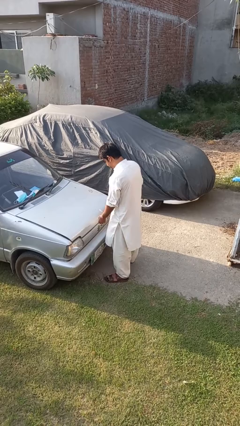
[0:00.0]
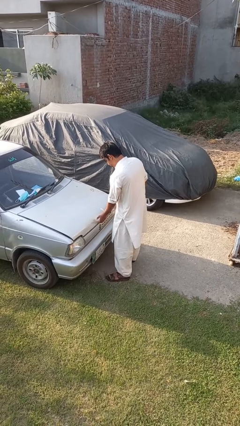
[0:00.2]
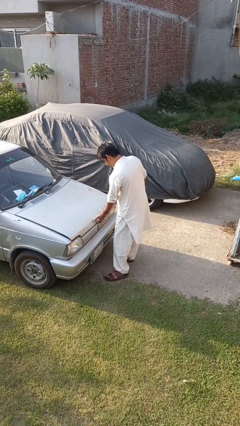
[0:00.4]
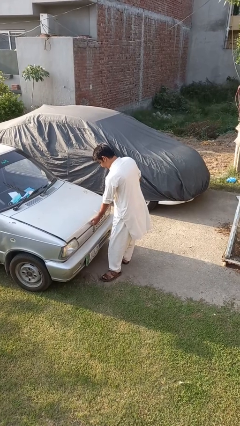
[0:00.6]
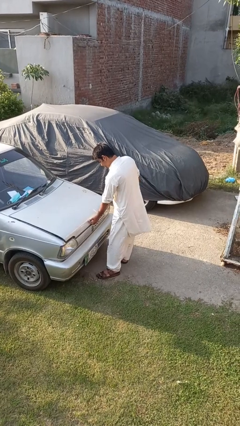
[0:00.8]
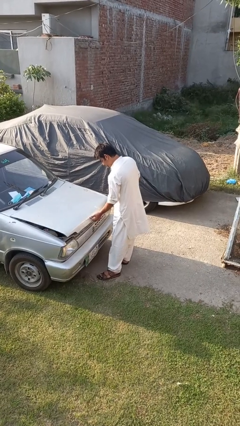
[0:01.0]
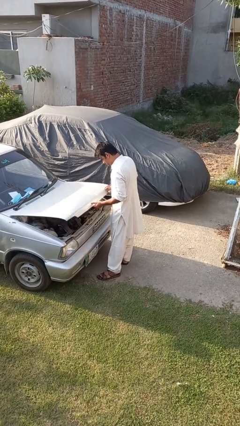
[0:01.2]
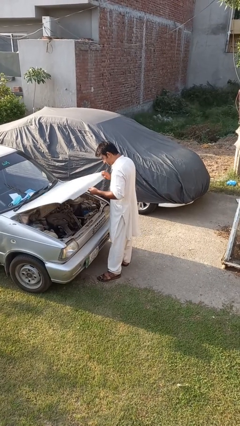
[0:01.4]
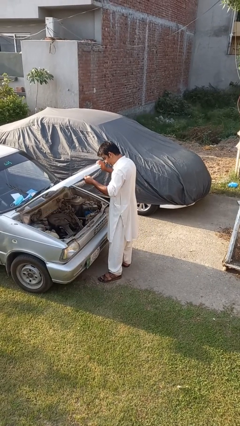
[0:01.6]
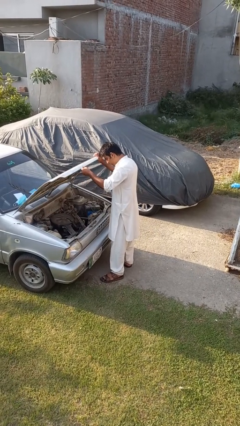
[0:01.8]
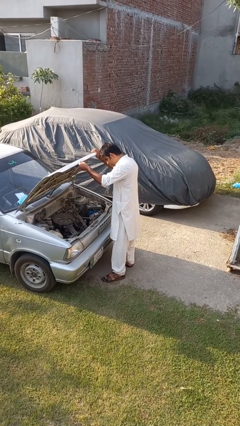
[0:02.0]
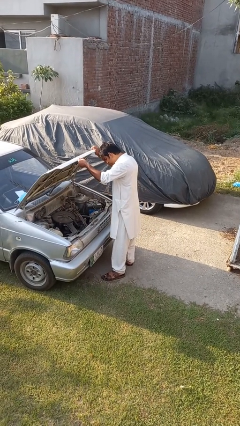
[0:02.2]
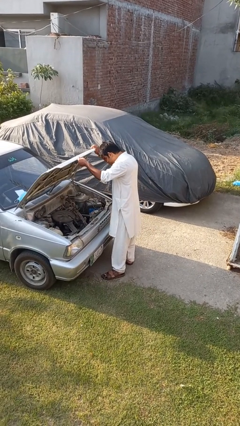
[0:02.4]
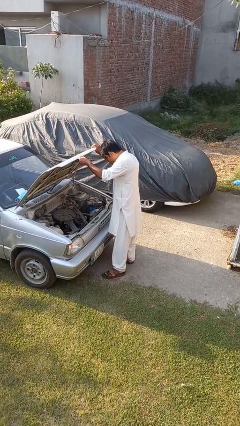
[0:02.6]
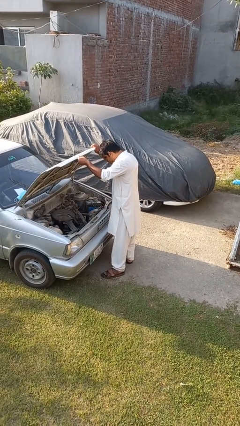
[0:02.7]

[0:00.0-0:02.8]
person opens car hood

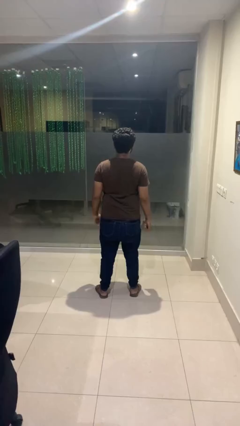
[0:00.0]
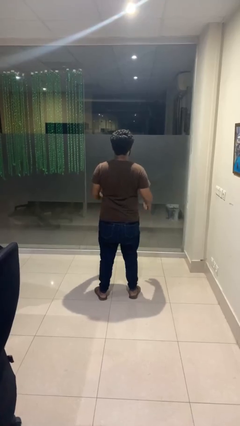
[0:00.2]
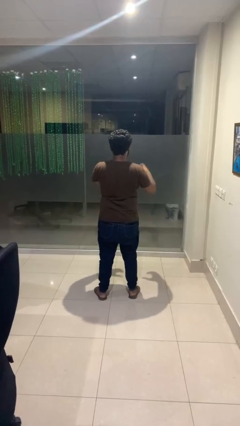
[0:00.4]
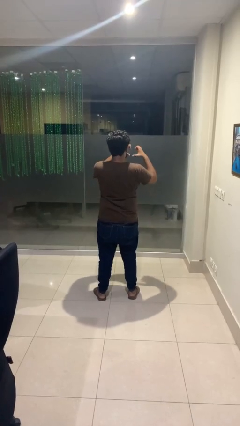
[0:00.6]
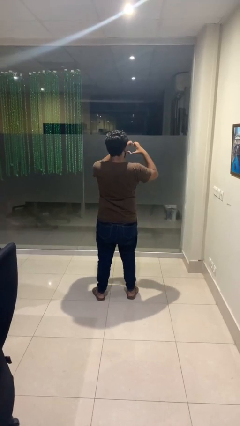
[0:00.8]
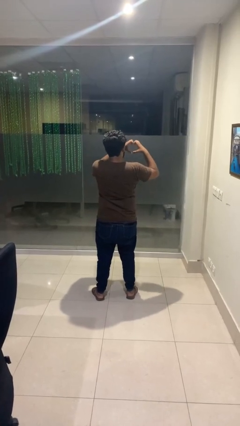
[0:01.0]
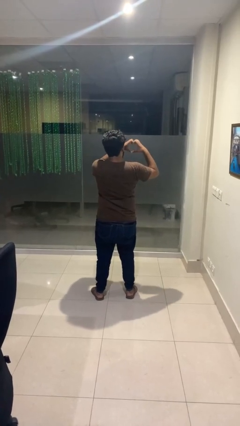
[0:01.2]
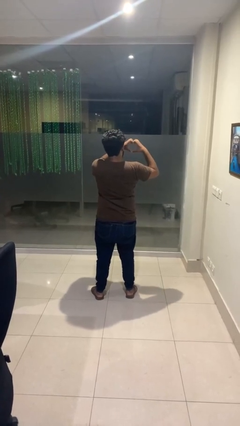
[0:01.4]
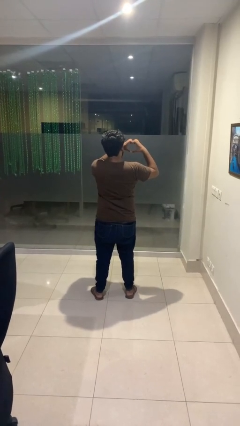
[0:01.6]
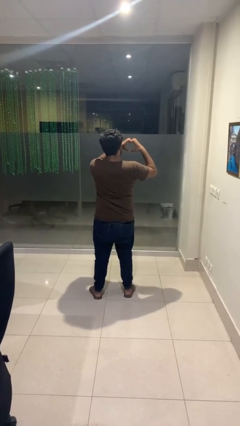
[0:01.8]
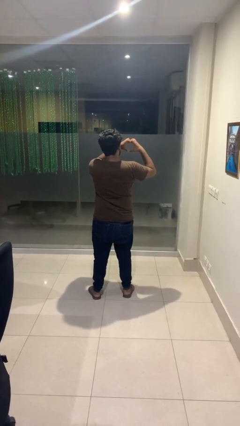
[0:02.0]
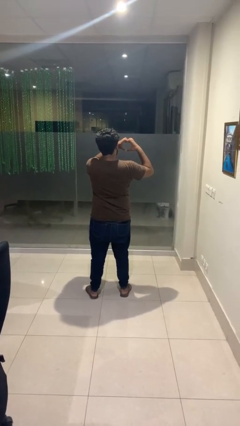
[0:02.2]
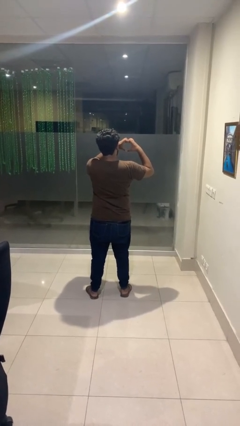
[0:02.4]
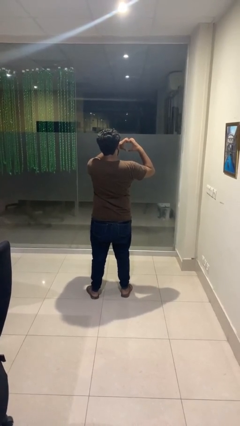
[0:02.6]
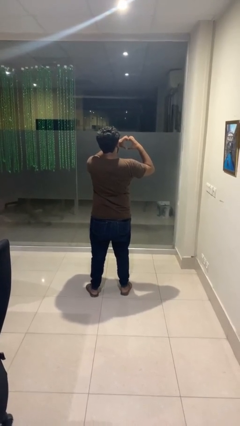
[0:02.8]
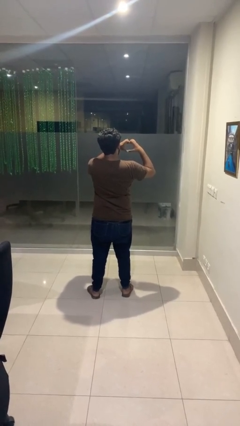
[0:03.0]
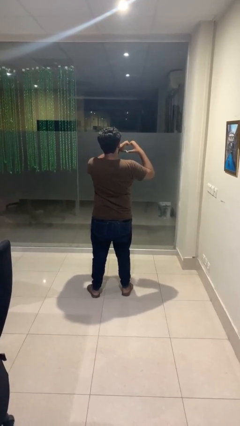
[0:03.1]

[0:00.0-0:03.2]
person gestures heart

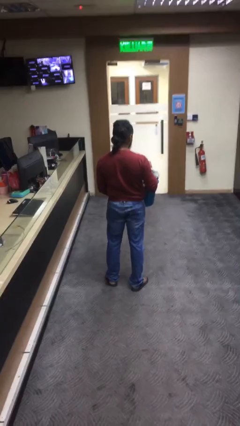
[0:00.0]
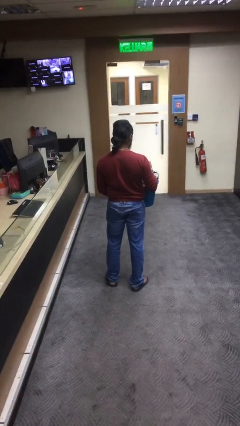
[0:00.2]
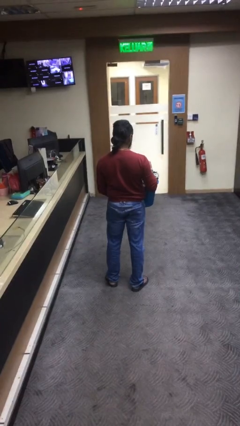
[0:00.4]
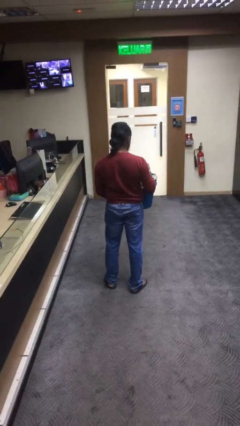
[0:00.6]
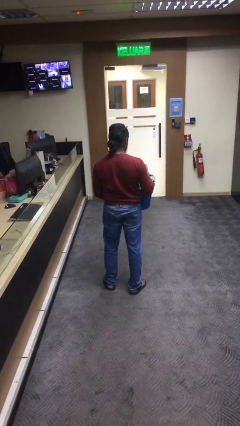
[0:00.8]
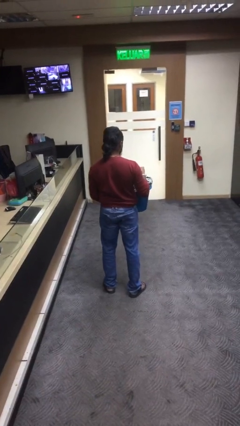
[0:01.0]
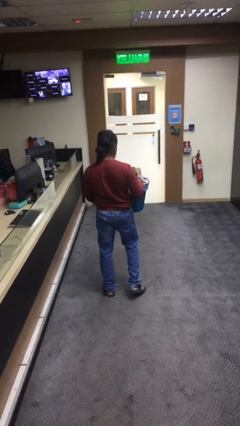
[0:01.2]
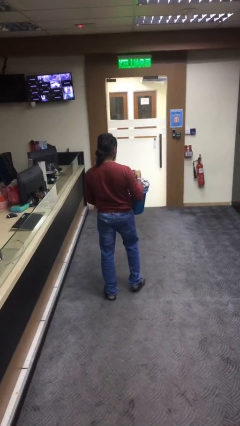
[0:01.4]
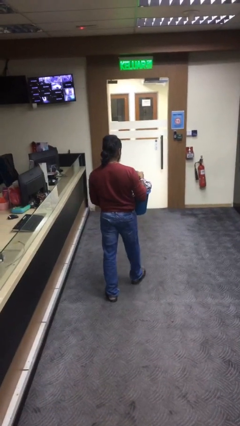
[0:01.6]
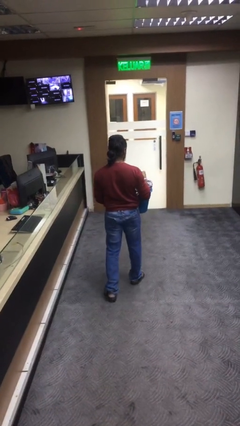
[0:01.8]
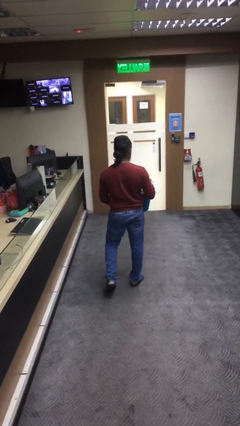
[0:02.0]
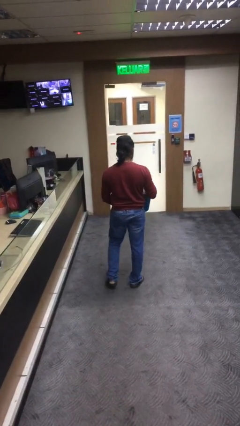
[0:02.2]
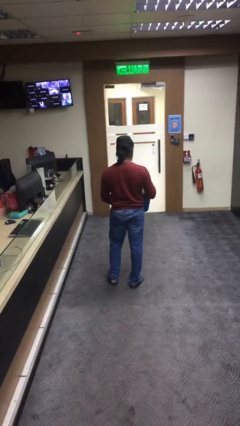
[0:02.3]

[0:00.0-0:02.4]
person carries laundry basket

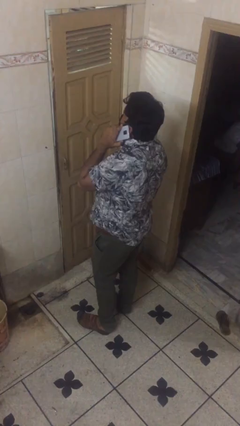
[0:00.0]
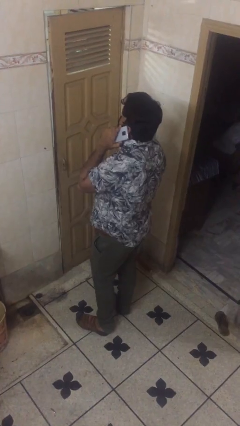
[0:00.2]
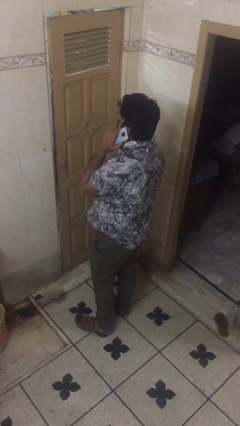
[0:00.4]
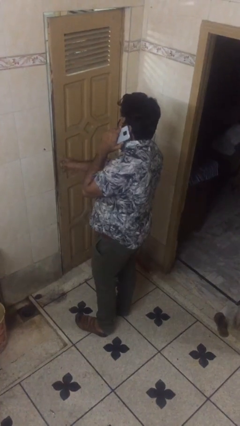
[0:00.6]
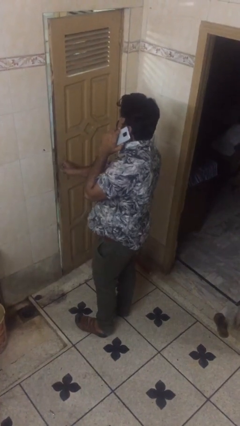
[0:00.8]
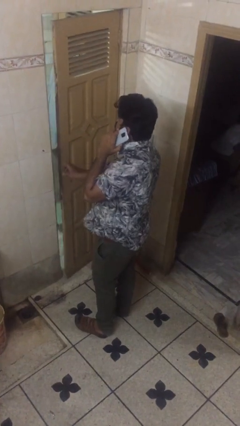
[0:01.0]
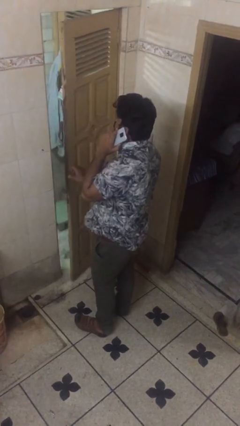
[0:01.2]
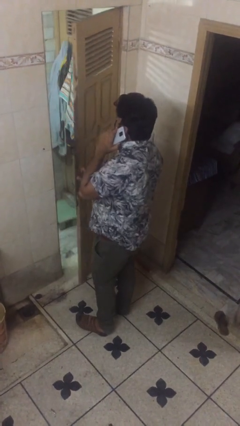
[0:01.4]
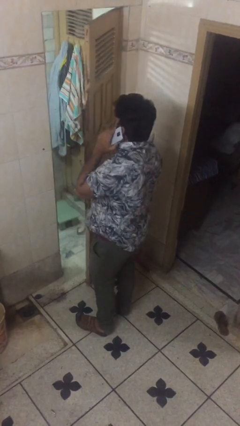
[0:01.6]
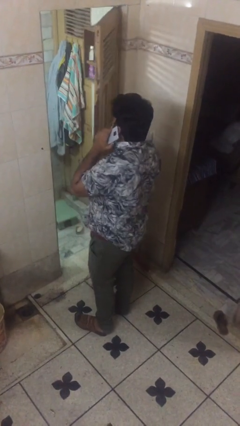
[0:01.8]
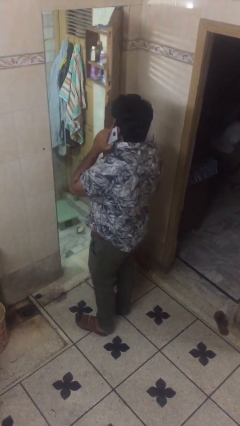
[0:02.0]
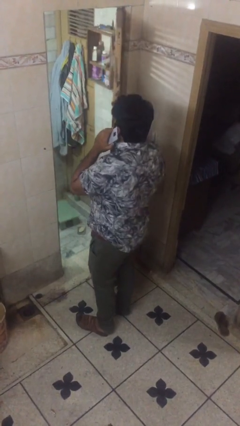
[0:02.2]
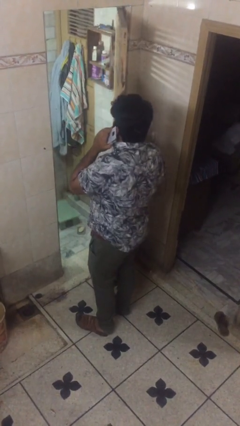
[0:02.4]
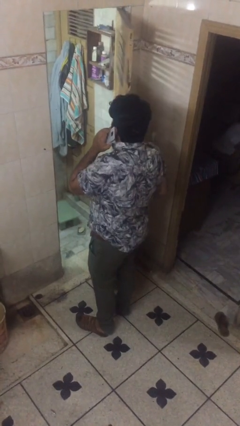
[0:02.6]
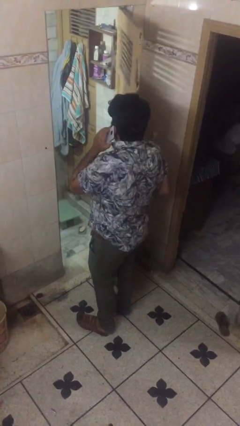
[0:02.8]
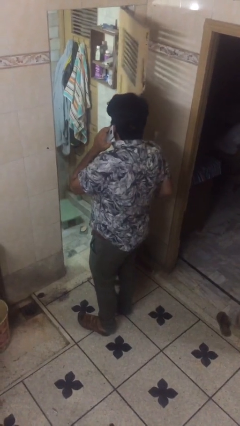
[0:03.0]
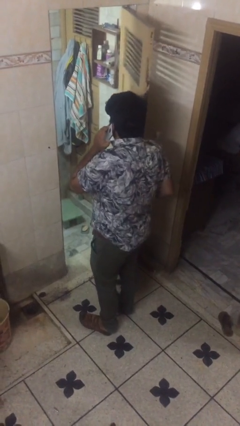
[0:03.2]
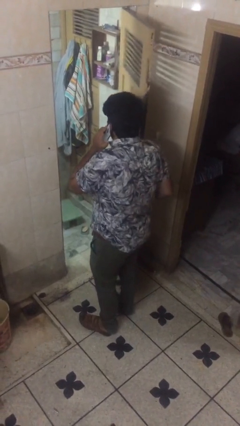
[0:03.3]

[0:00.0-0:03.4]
person opens facility door

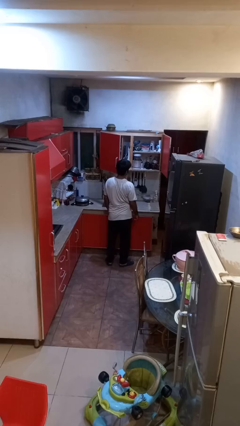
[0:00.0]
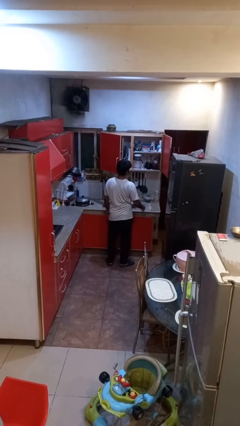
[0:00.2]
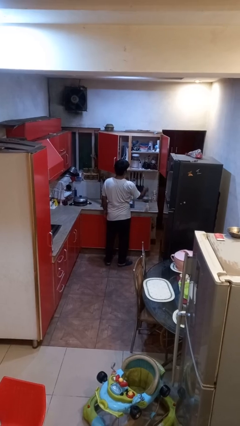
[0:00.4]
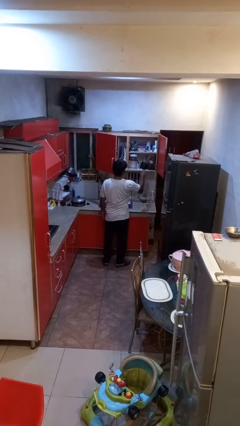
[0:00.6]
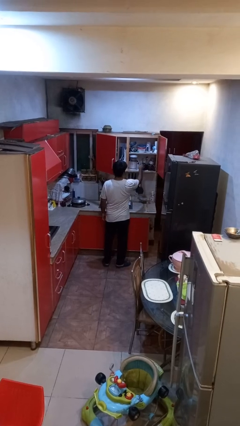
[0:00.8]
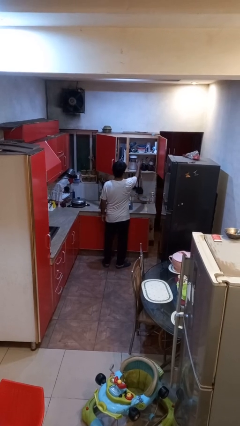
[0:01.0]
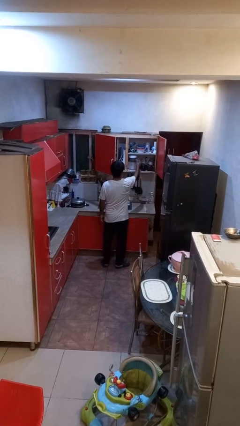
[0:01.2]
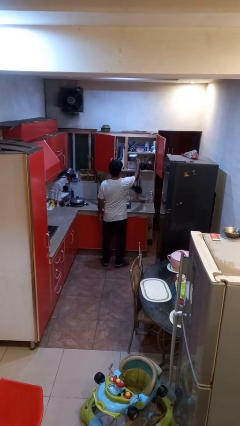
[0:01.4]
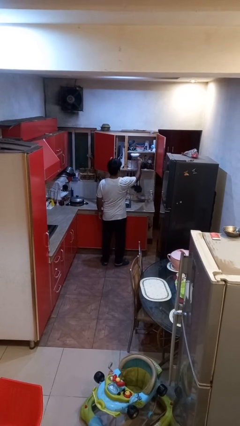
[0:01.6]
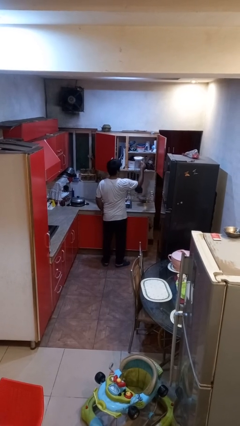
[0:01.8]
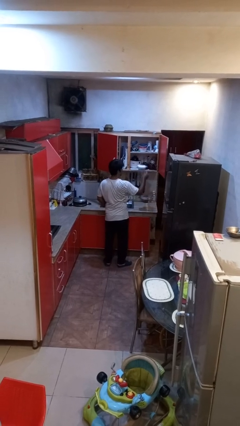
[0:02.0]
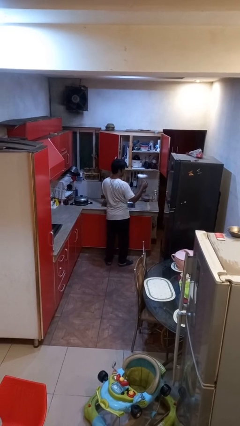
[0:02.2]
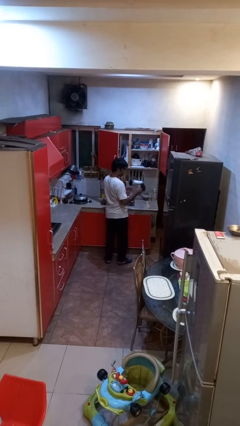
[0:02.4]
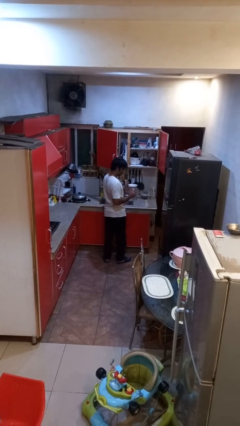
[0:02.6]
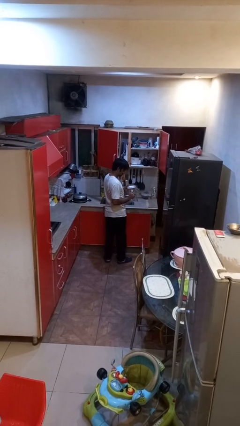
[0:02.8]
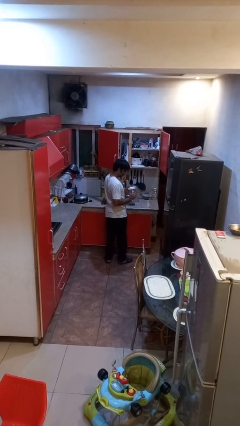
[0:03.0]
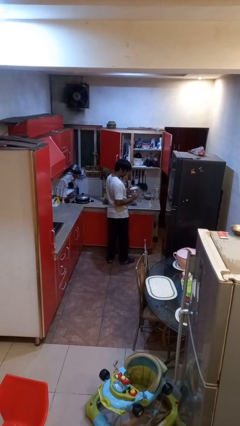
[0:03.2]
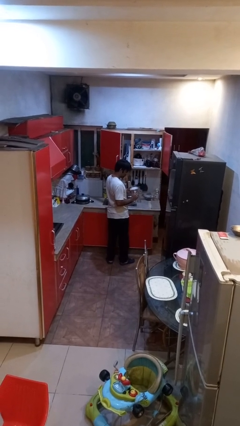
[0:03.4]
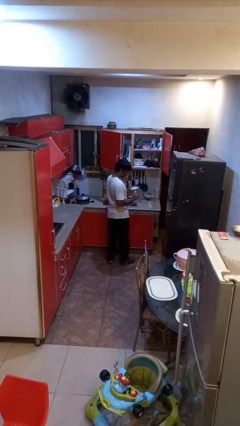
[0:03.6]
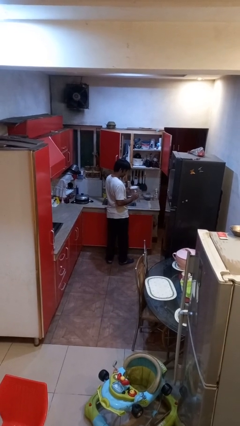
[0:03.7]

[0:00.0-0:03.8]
person picks up object from cabinet

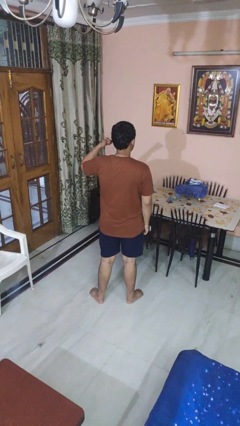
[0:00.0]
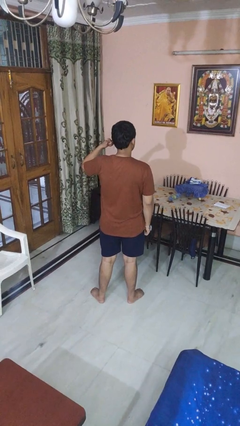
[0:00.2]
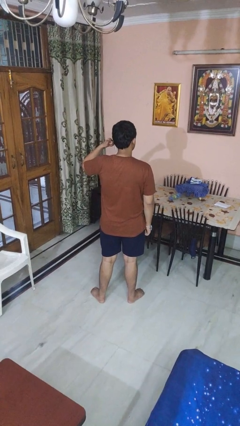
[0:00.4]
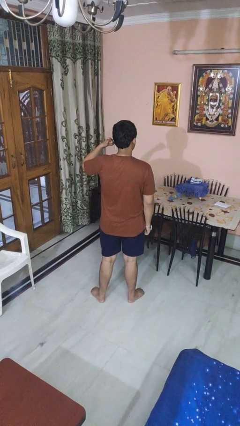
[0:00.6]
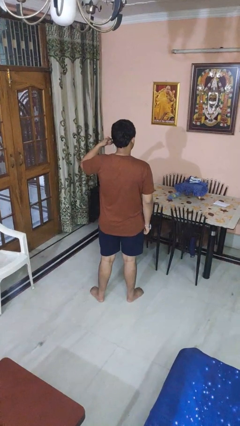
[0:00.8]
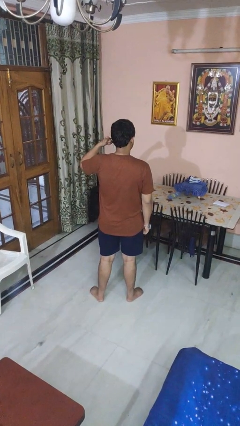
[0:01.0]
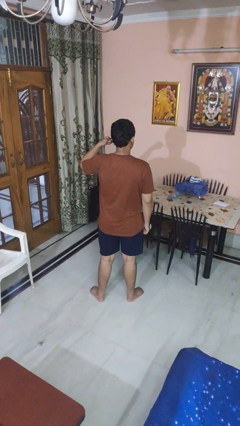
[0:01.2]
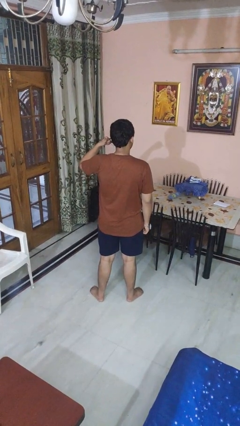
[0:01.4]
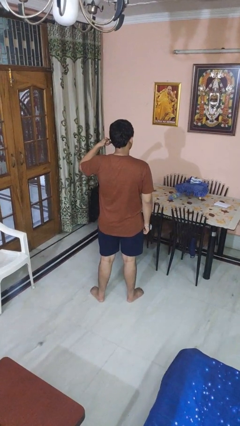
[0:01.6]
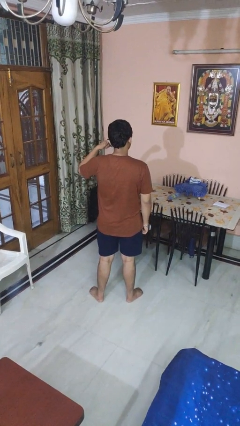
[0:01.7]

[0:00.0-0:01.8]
person gestures call me

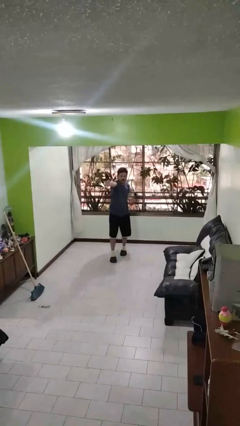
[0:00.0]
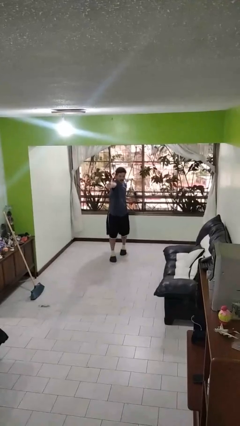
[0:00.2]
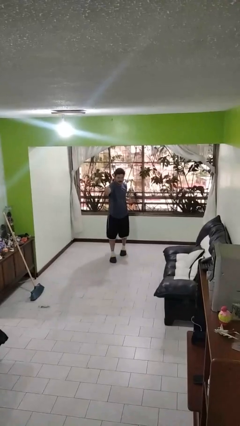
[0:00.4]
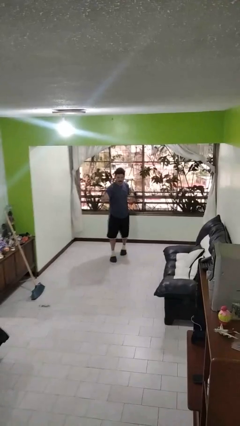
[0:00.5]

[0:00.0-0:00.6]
person punches
